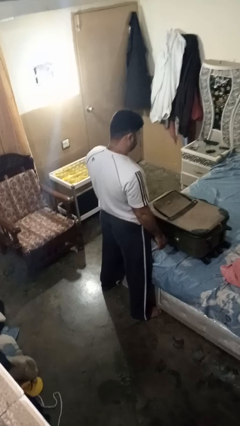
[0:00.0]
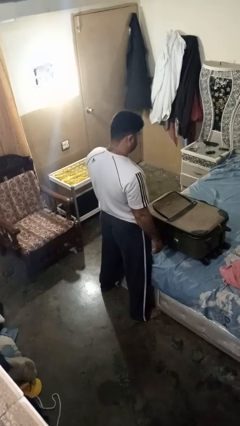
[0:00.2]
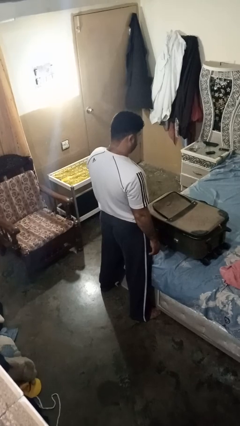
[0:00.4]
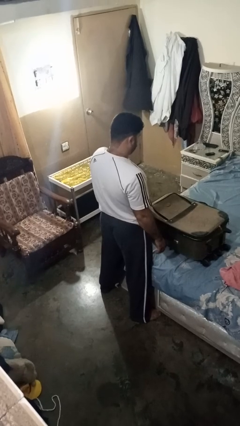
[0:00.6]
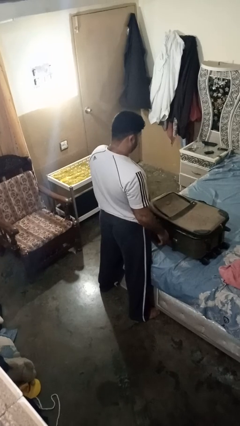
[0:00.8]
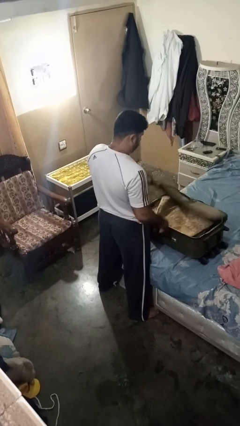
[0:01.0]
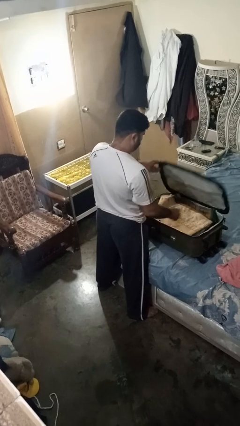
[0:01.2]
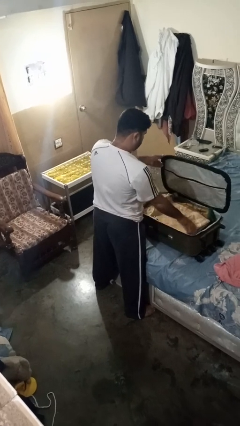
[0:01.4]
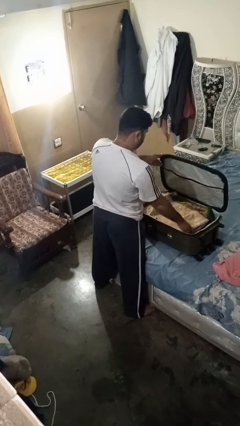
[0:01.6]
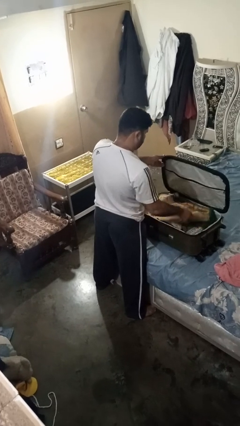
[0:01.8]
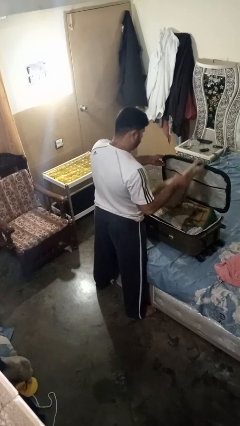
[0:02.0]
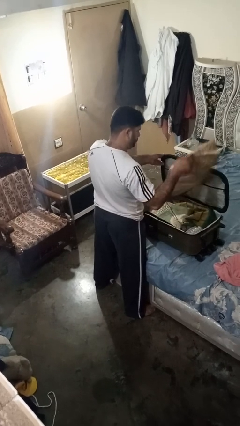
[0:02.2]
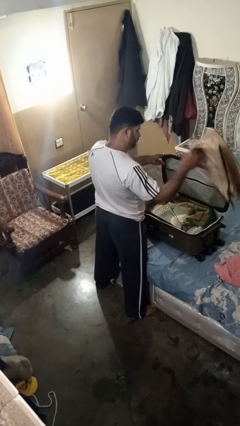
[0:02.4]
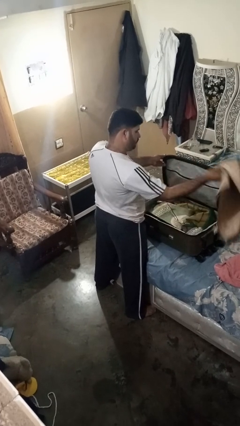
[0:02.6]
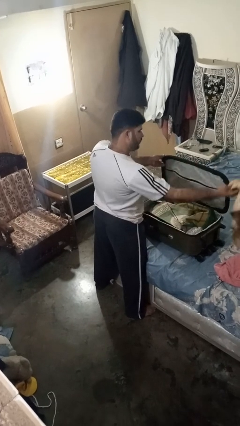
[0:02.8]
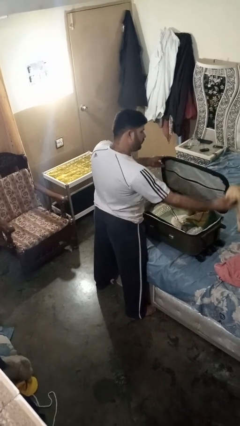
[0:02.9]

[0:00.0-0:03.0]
person unloads clothes from suitcase

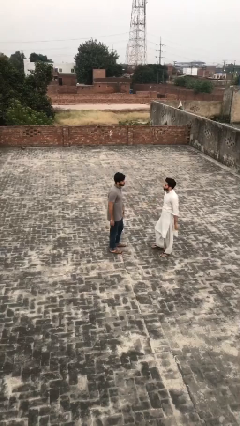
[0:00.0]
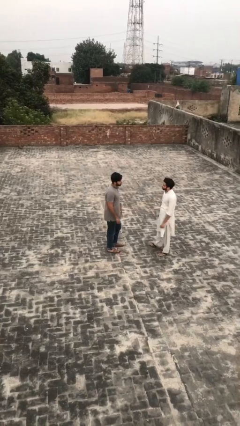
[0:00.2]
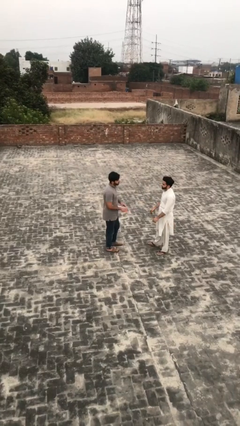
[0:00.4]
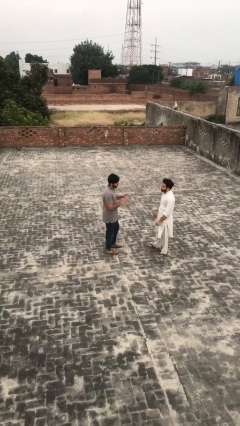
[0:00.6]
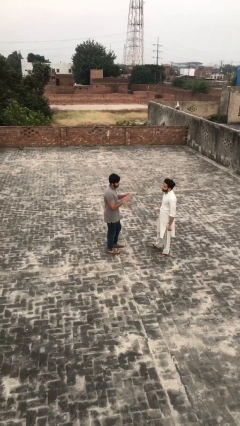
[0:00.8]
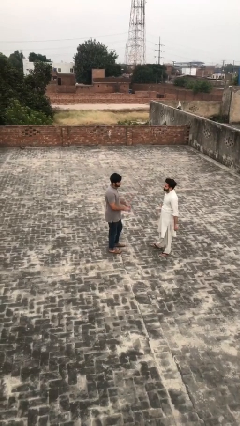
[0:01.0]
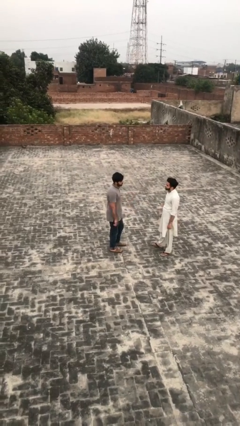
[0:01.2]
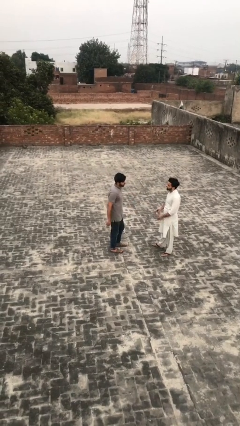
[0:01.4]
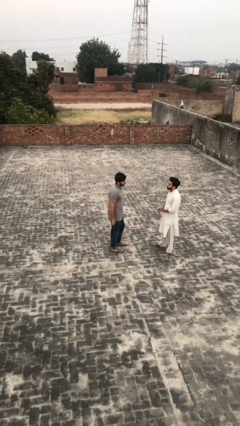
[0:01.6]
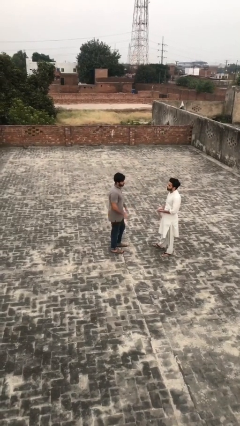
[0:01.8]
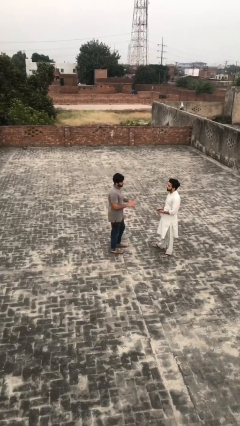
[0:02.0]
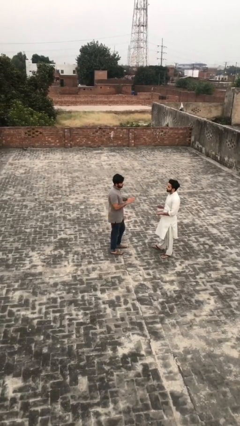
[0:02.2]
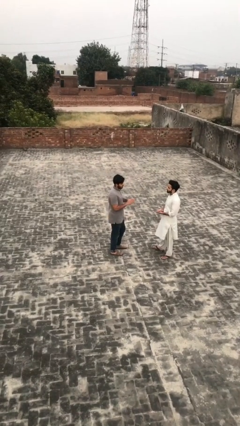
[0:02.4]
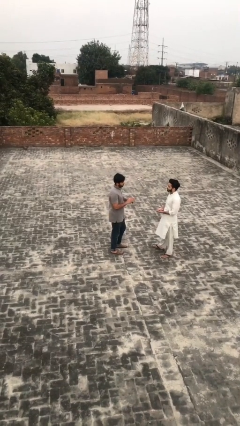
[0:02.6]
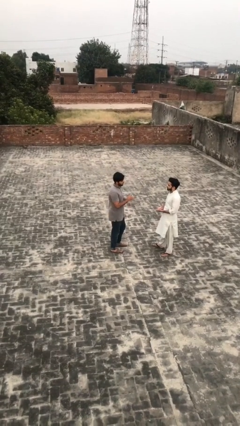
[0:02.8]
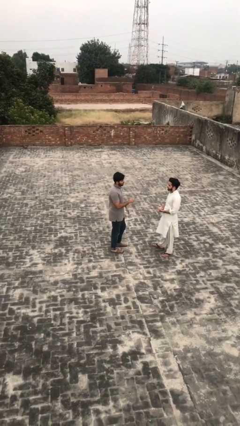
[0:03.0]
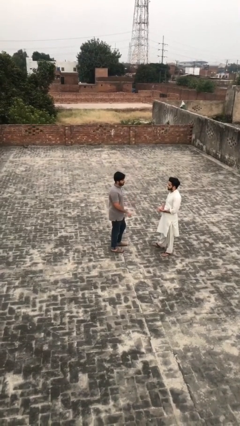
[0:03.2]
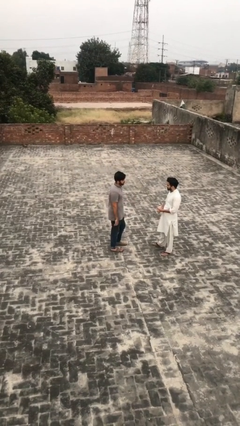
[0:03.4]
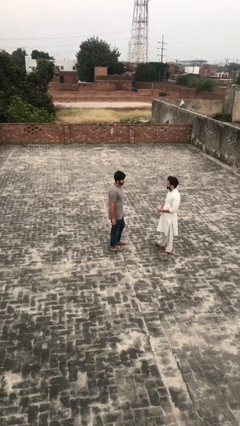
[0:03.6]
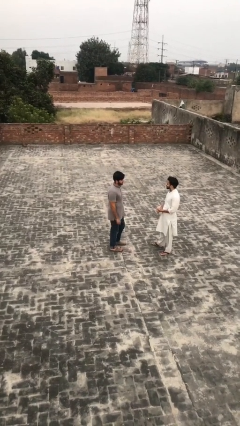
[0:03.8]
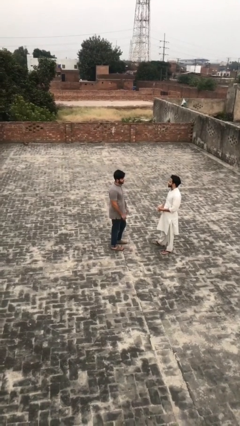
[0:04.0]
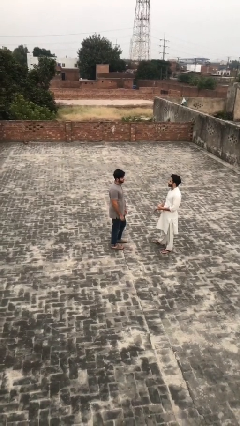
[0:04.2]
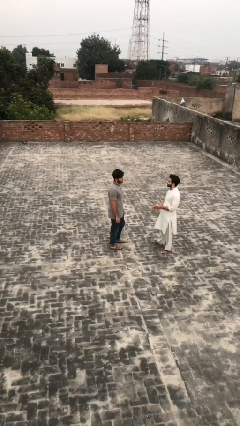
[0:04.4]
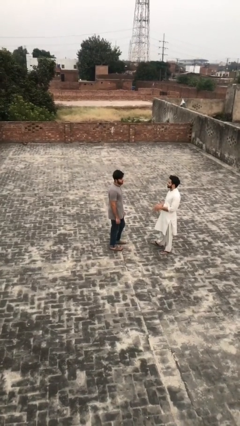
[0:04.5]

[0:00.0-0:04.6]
person talks to person

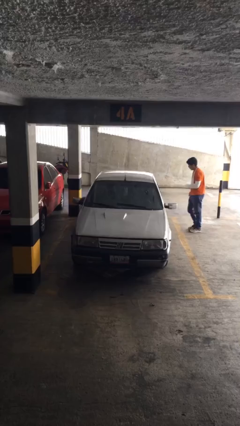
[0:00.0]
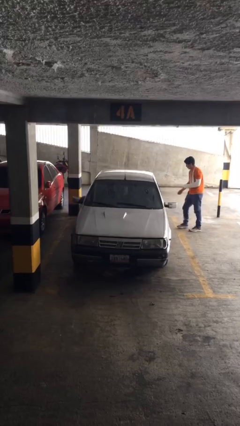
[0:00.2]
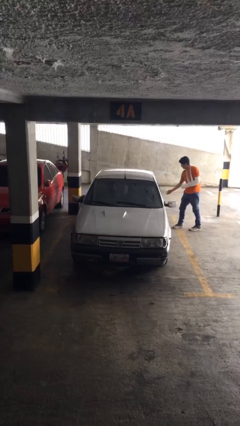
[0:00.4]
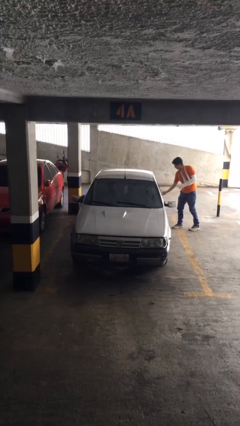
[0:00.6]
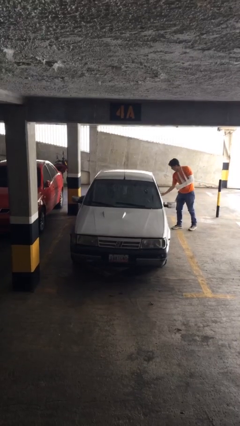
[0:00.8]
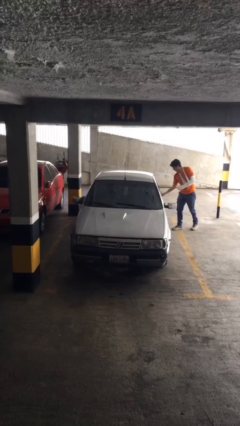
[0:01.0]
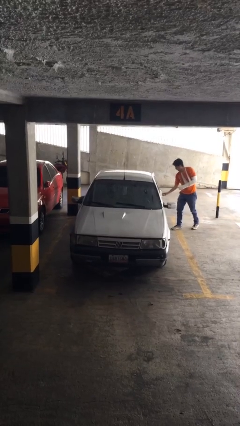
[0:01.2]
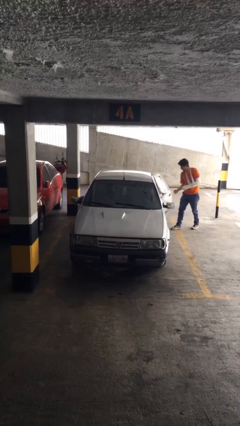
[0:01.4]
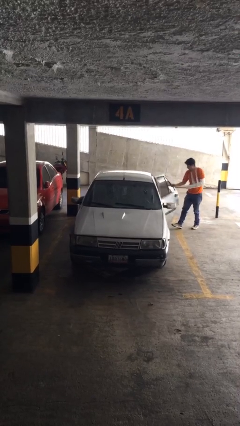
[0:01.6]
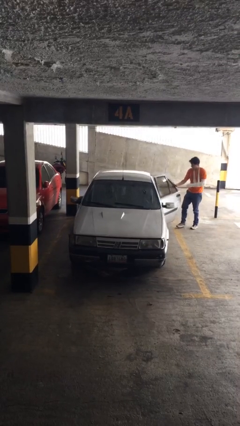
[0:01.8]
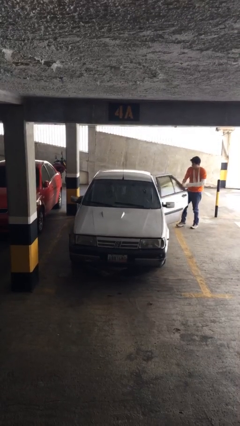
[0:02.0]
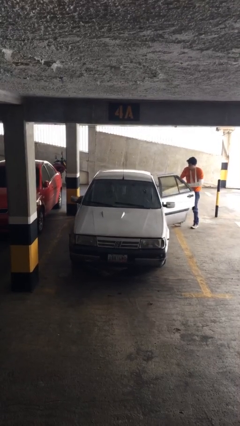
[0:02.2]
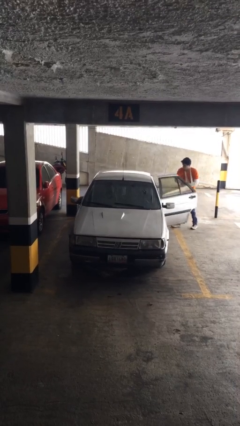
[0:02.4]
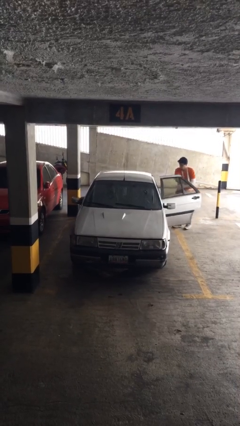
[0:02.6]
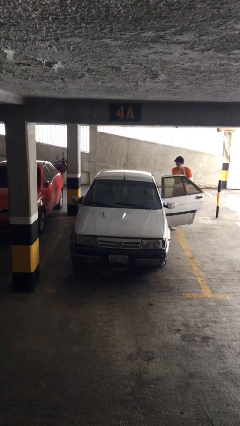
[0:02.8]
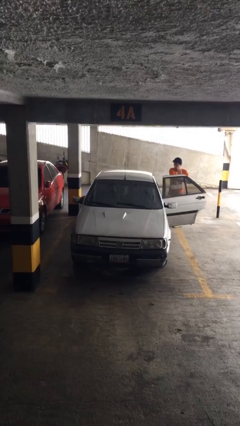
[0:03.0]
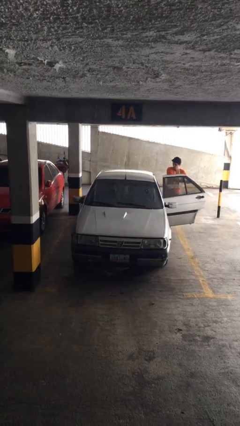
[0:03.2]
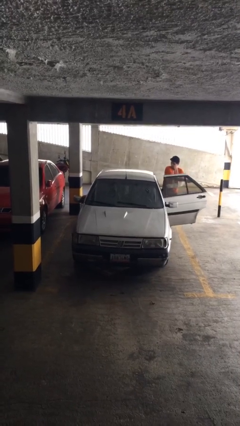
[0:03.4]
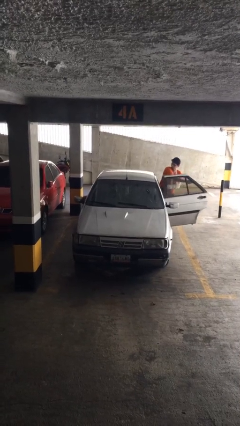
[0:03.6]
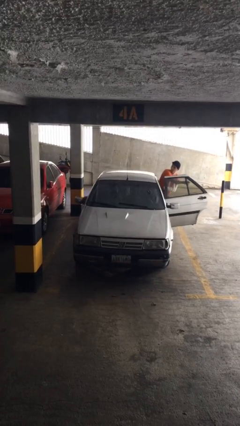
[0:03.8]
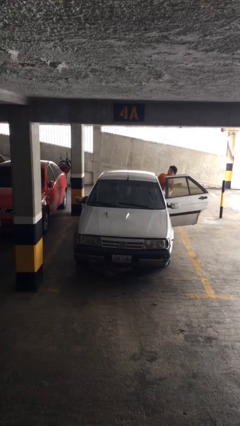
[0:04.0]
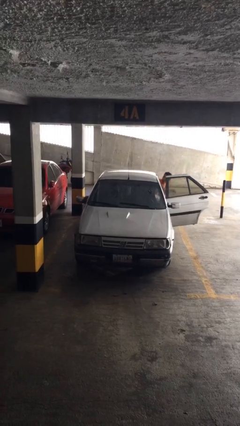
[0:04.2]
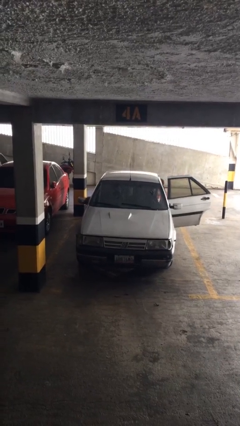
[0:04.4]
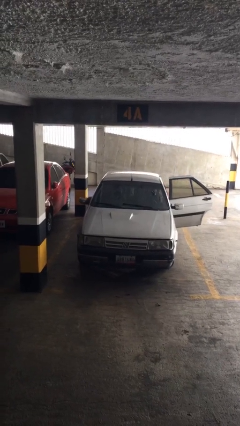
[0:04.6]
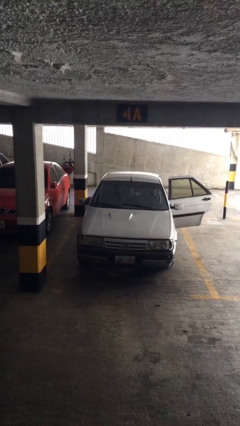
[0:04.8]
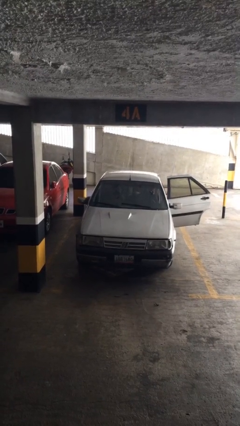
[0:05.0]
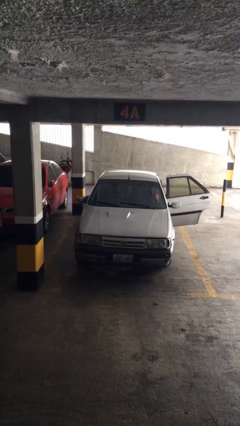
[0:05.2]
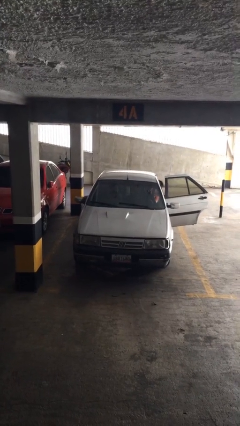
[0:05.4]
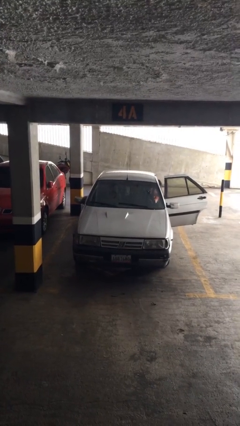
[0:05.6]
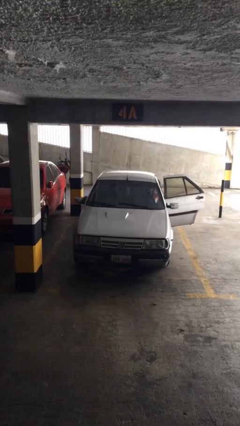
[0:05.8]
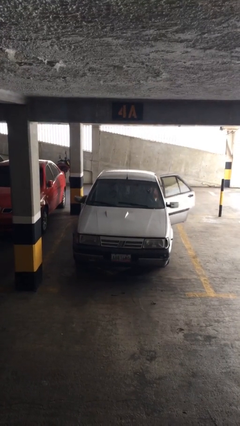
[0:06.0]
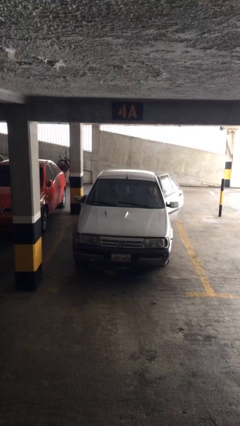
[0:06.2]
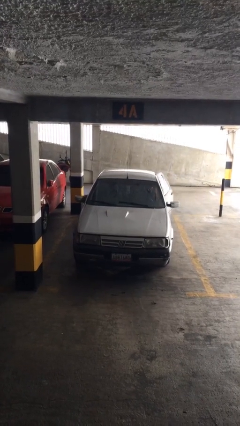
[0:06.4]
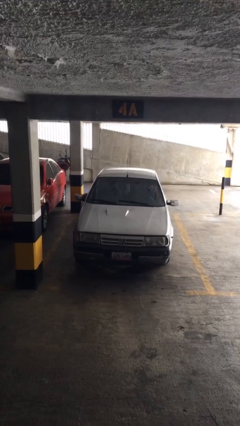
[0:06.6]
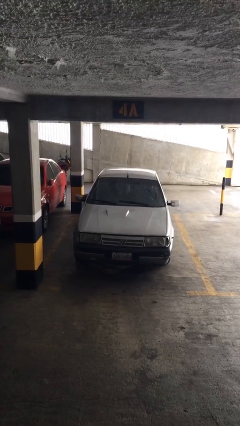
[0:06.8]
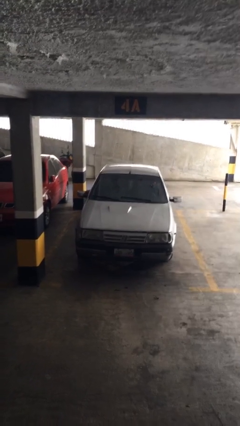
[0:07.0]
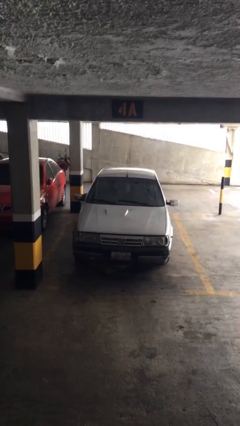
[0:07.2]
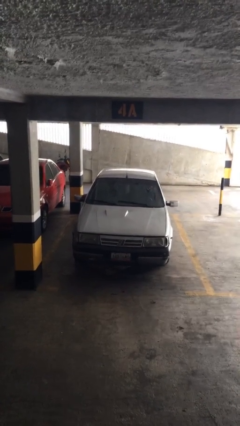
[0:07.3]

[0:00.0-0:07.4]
car picks up person

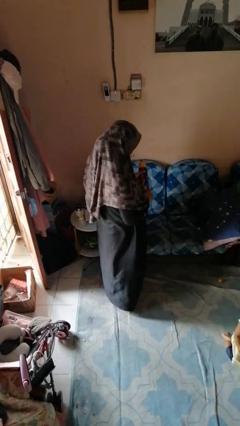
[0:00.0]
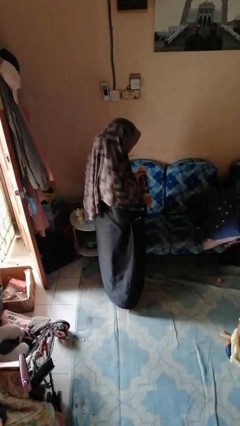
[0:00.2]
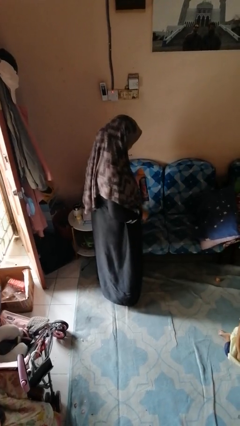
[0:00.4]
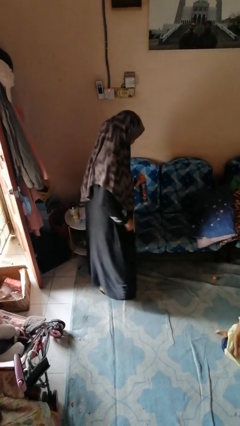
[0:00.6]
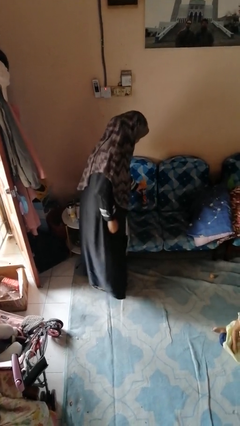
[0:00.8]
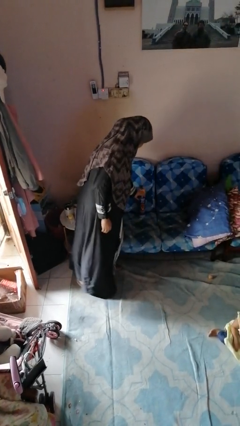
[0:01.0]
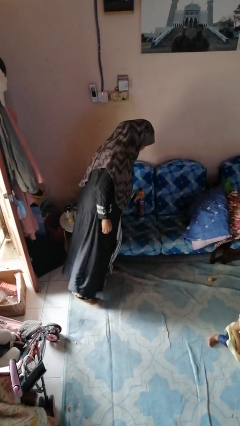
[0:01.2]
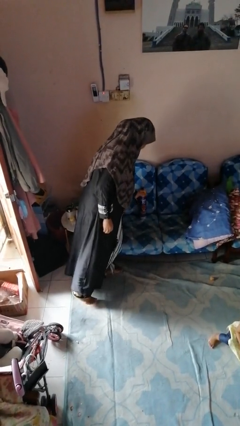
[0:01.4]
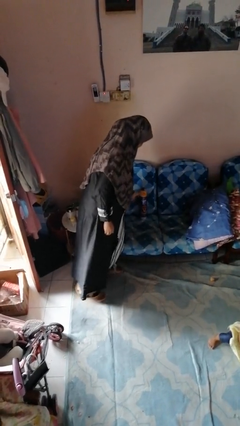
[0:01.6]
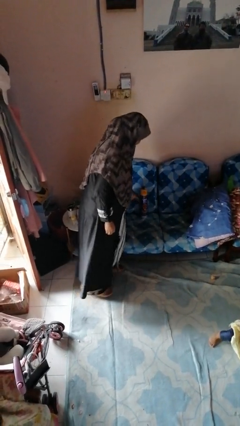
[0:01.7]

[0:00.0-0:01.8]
person puts down object on couch

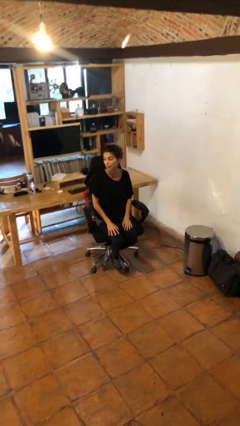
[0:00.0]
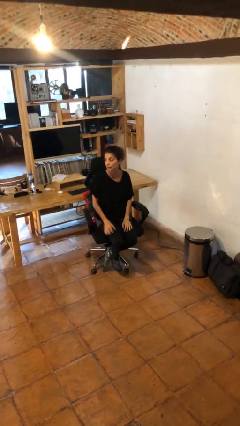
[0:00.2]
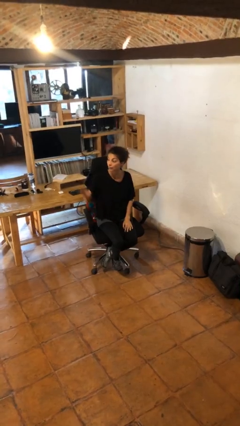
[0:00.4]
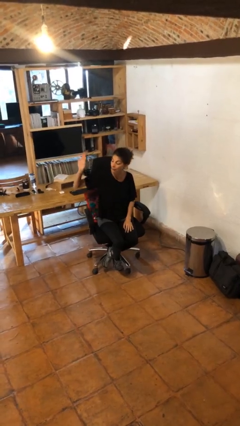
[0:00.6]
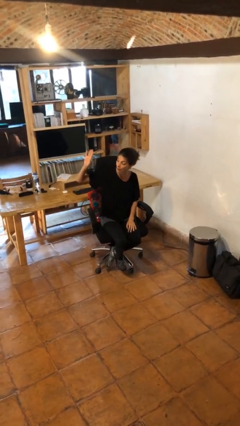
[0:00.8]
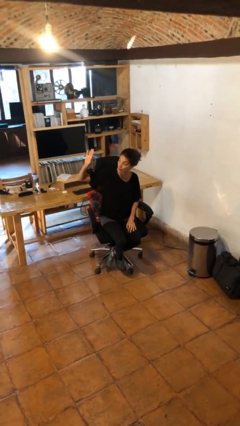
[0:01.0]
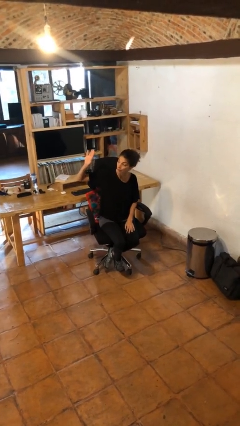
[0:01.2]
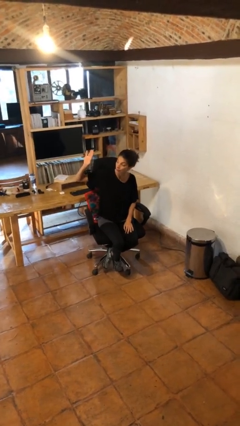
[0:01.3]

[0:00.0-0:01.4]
person gestures raise hand
